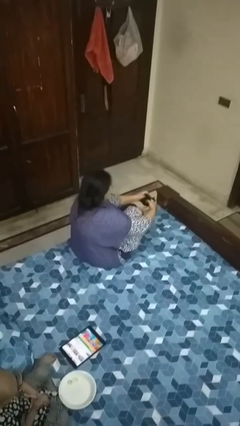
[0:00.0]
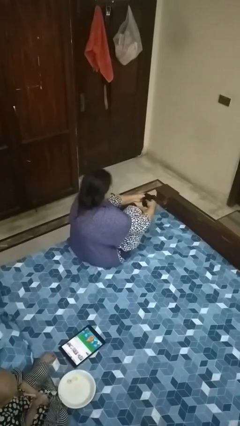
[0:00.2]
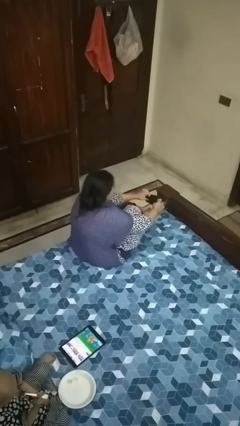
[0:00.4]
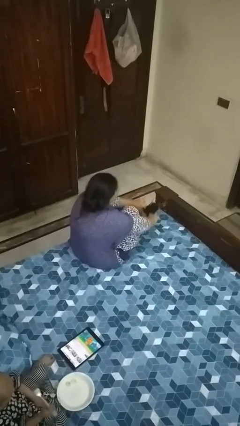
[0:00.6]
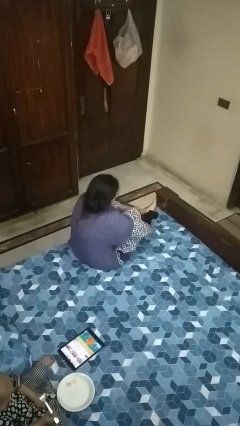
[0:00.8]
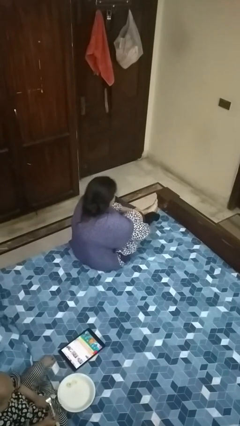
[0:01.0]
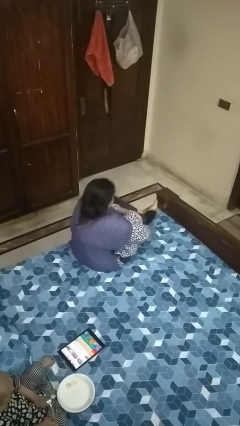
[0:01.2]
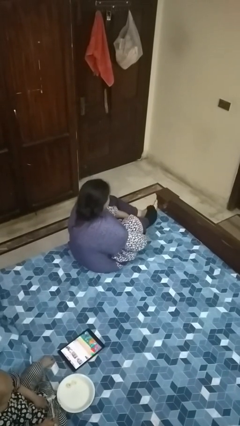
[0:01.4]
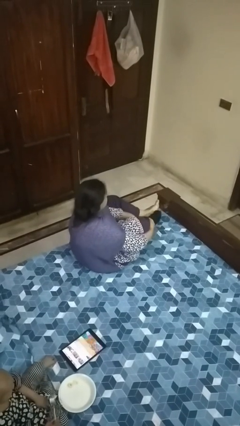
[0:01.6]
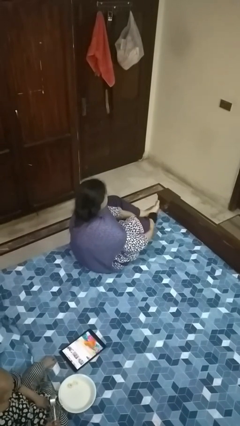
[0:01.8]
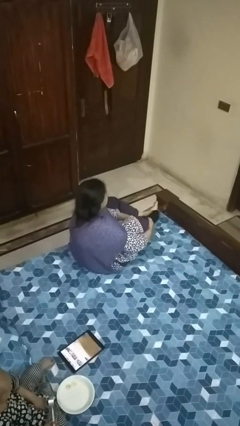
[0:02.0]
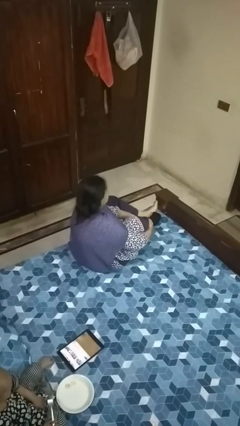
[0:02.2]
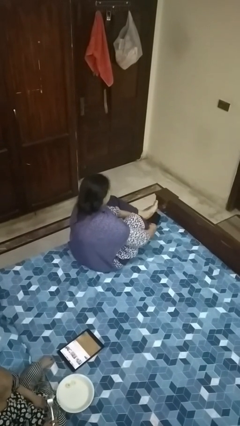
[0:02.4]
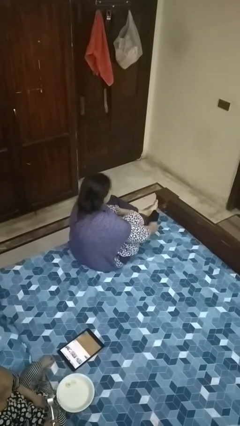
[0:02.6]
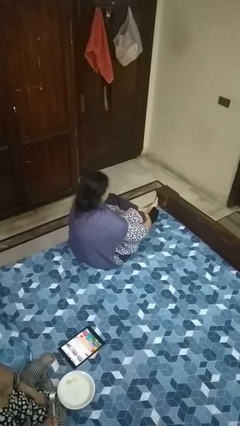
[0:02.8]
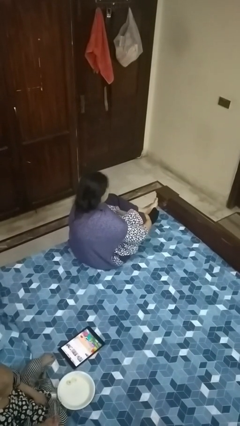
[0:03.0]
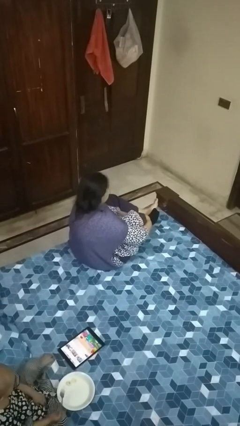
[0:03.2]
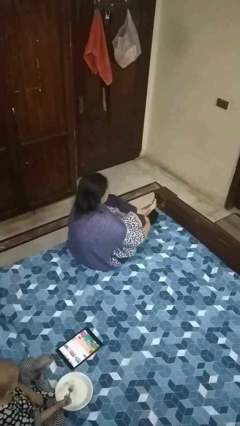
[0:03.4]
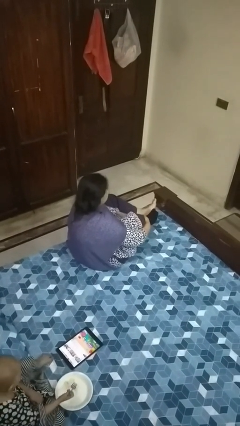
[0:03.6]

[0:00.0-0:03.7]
person puts on socks

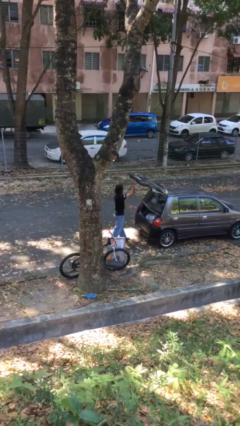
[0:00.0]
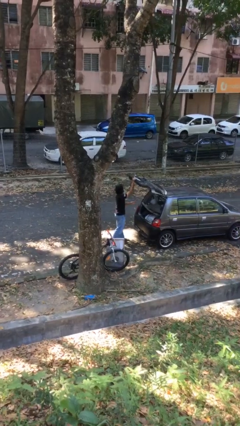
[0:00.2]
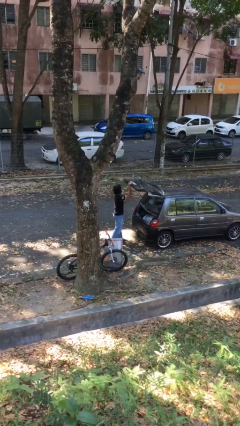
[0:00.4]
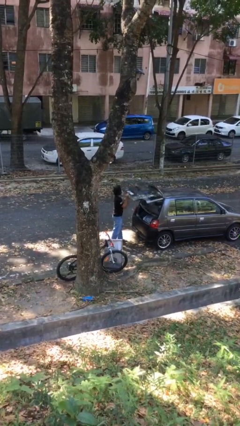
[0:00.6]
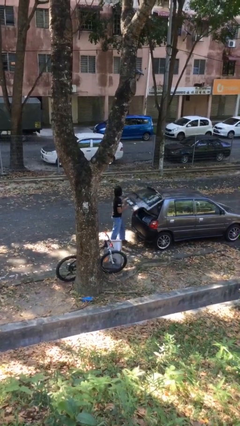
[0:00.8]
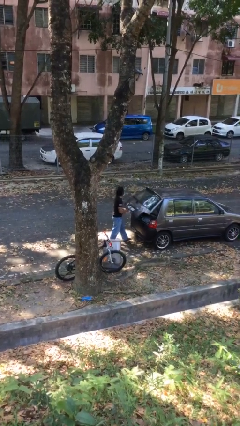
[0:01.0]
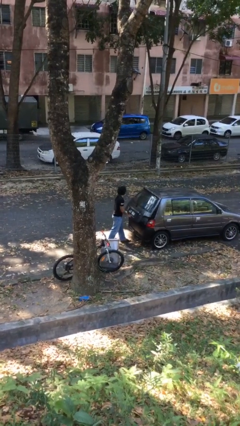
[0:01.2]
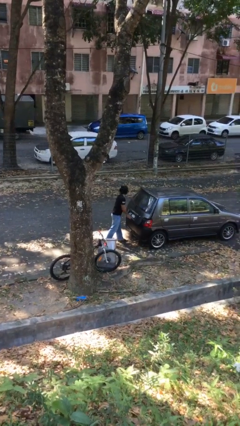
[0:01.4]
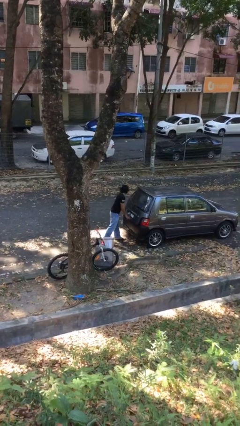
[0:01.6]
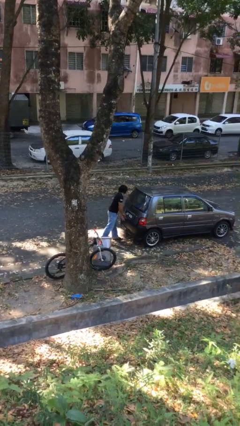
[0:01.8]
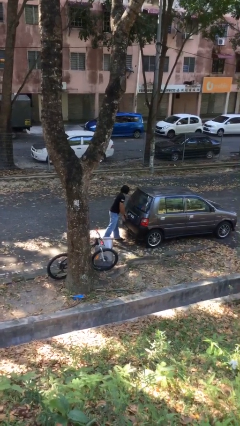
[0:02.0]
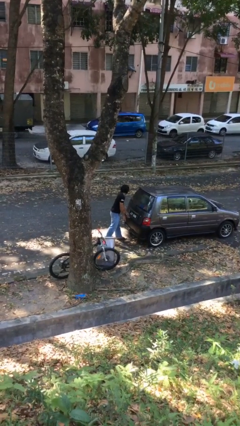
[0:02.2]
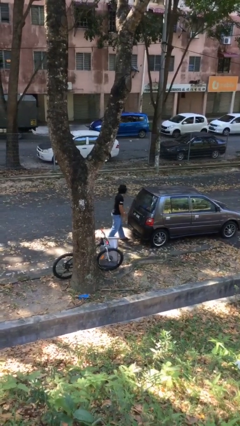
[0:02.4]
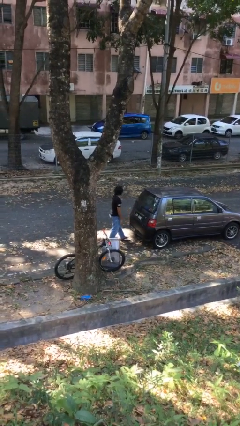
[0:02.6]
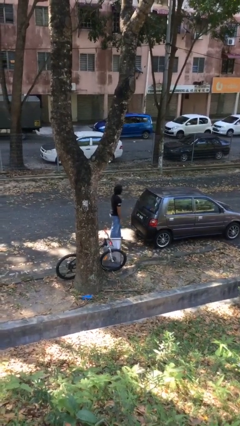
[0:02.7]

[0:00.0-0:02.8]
person closes car trunk

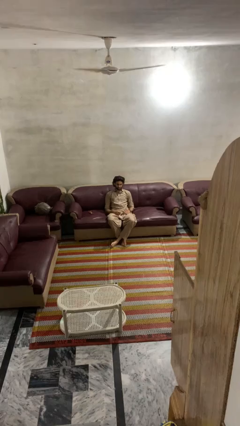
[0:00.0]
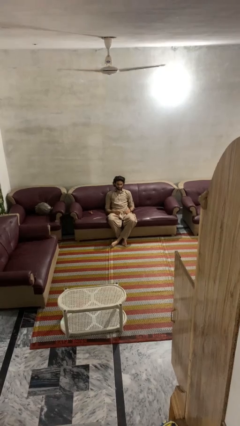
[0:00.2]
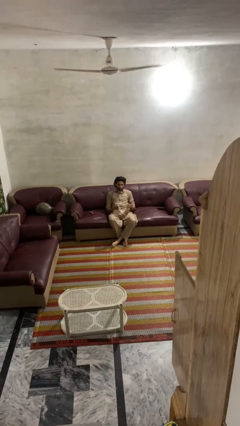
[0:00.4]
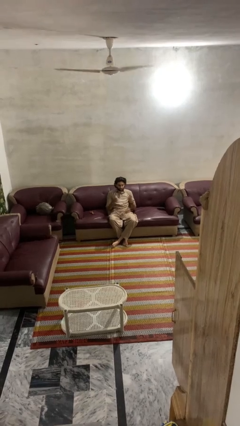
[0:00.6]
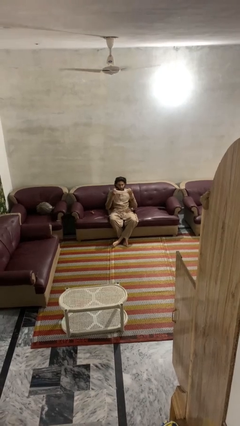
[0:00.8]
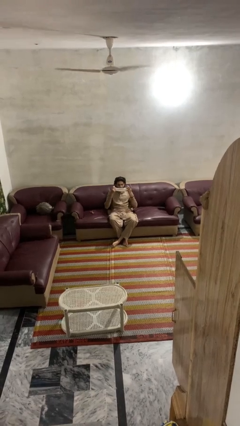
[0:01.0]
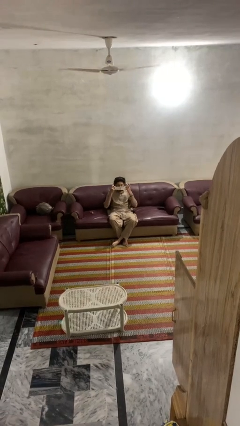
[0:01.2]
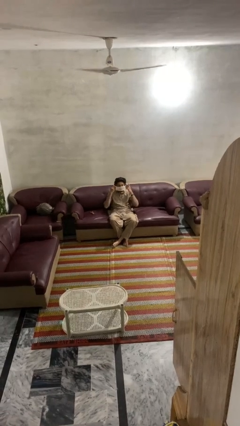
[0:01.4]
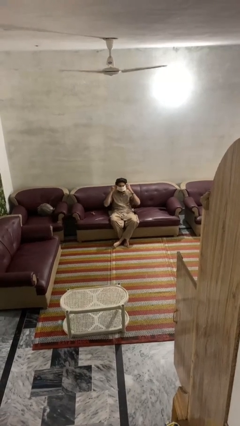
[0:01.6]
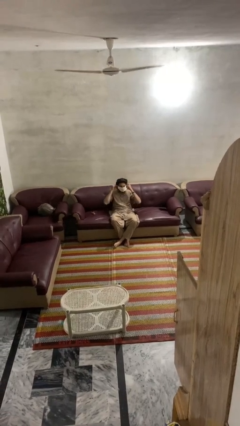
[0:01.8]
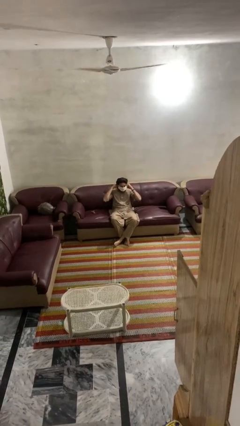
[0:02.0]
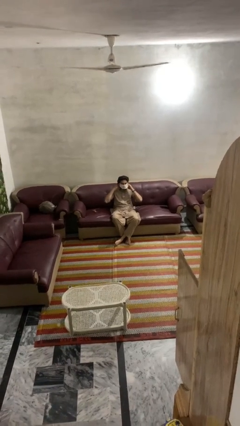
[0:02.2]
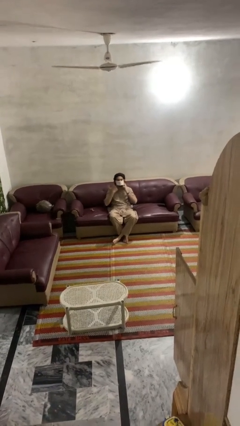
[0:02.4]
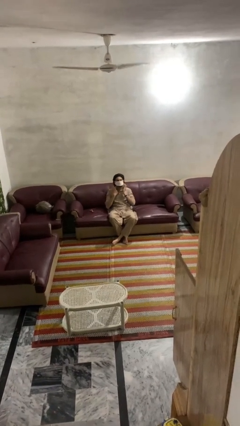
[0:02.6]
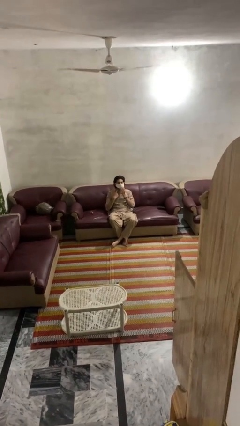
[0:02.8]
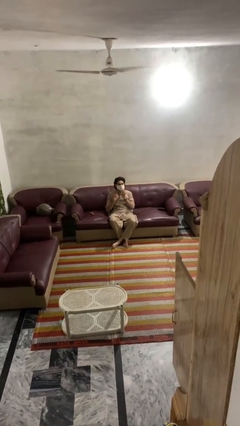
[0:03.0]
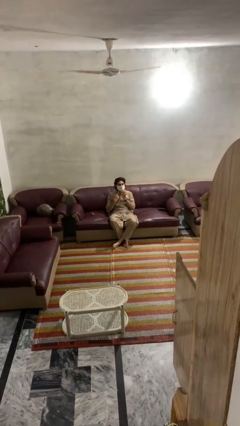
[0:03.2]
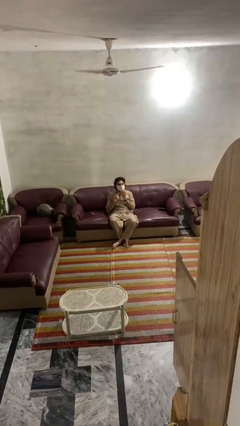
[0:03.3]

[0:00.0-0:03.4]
person puts on facemask

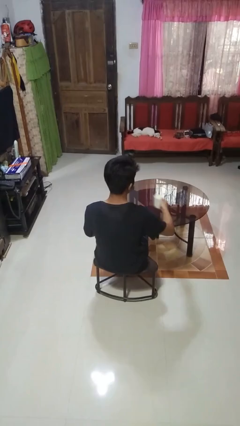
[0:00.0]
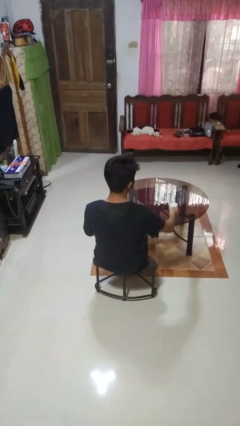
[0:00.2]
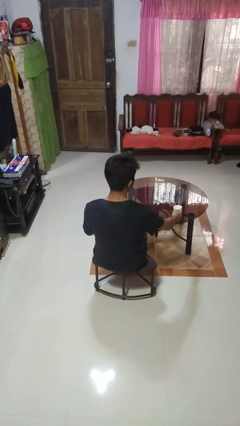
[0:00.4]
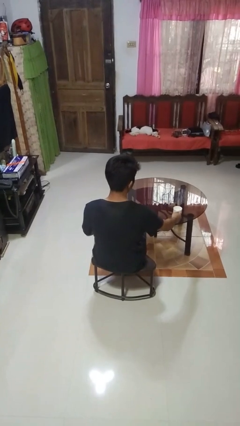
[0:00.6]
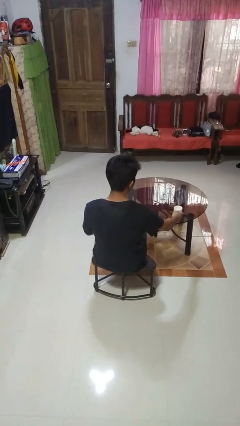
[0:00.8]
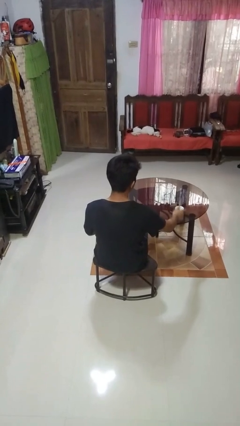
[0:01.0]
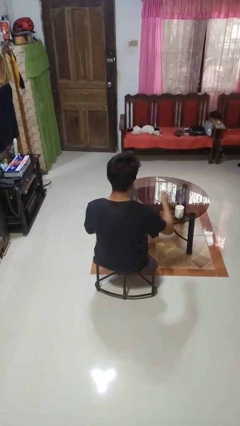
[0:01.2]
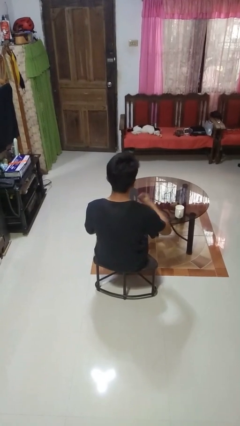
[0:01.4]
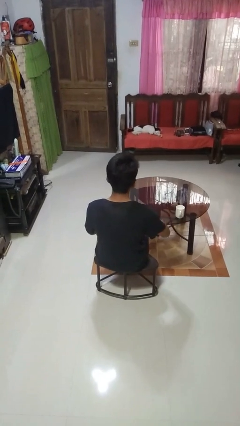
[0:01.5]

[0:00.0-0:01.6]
person puts down object on table

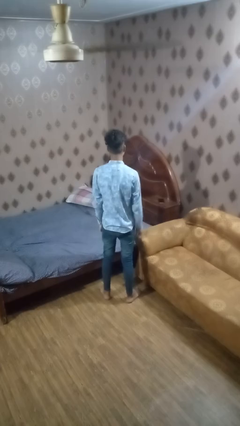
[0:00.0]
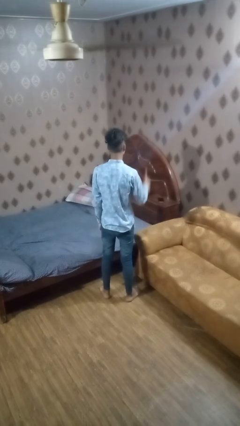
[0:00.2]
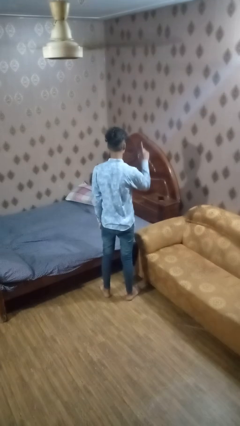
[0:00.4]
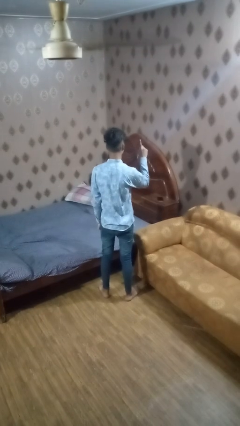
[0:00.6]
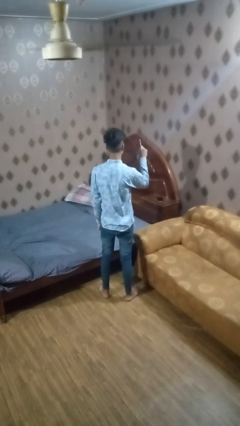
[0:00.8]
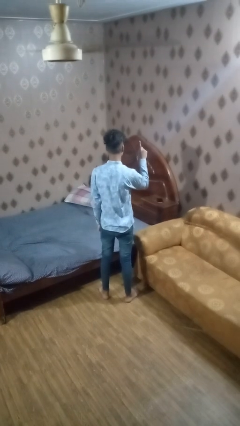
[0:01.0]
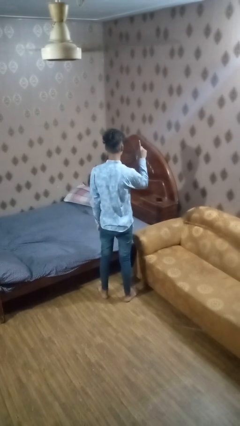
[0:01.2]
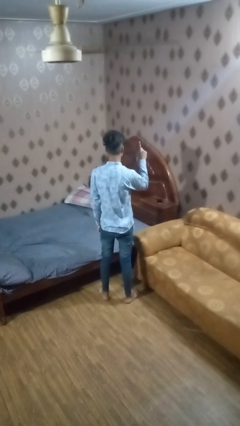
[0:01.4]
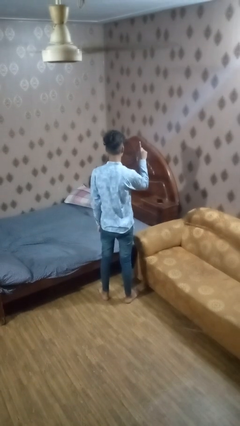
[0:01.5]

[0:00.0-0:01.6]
person gestures number one

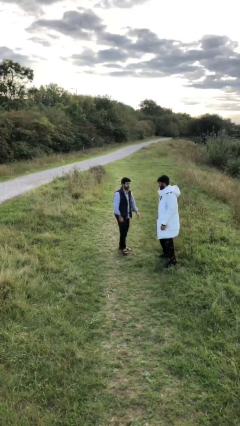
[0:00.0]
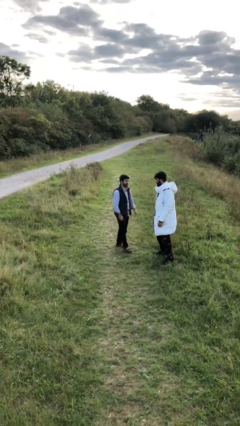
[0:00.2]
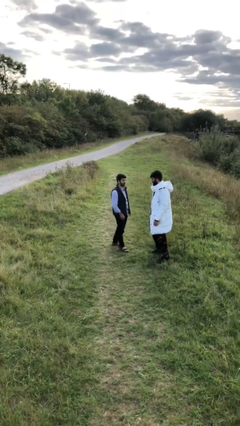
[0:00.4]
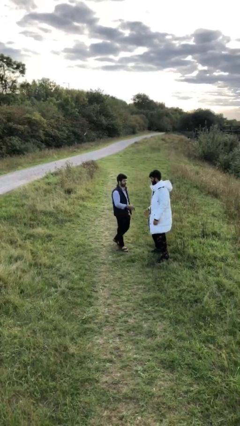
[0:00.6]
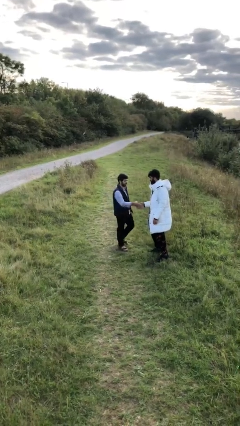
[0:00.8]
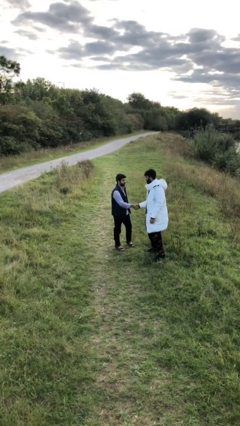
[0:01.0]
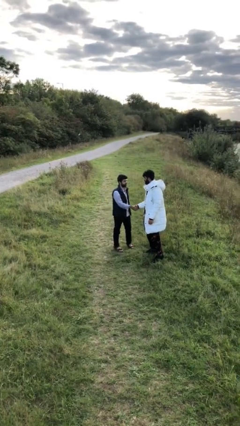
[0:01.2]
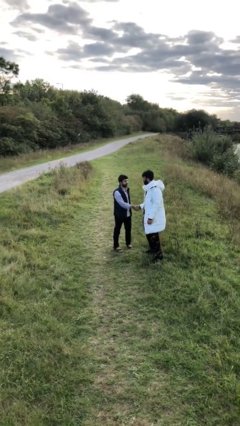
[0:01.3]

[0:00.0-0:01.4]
person shakes hand

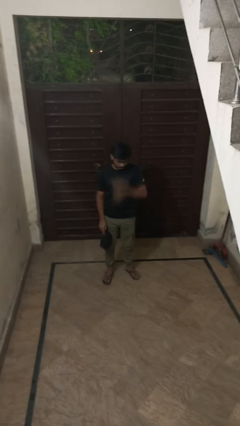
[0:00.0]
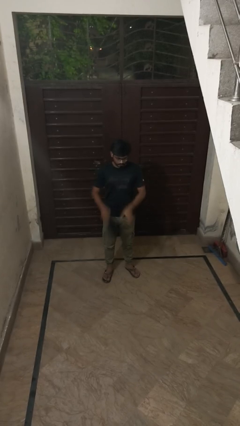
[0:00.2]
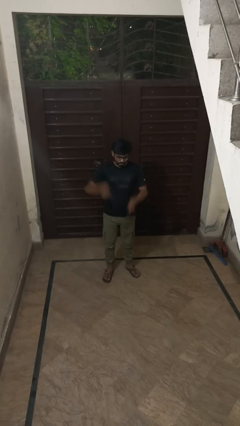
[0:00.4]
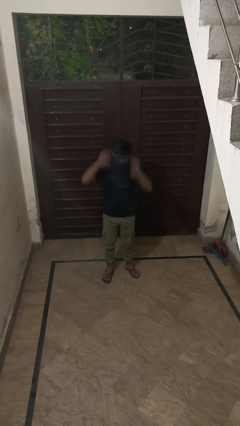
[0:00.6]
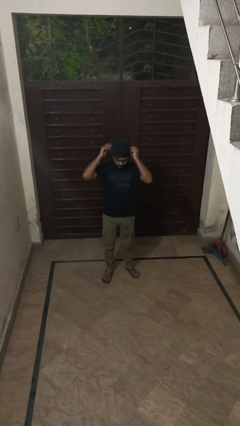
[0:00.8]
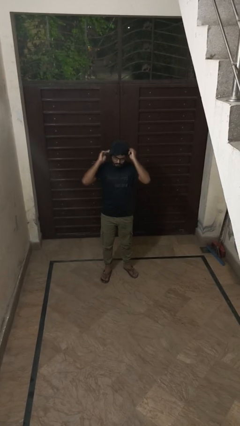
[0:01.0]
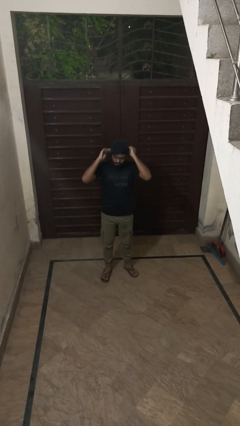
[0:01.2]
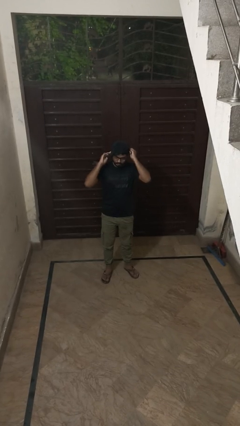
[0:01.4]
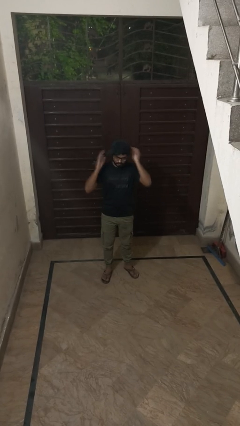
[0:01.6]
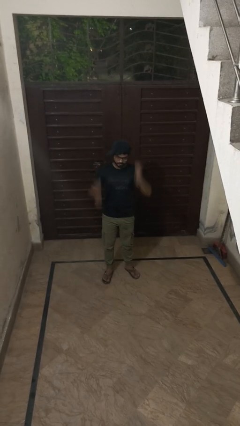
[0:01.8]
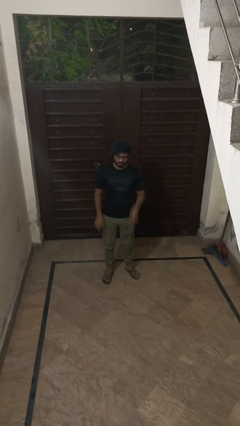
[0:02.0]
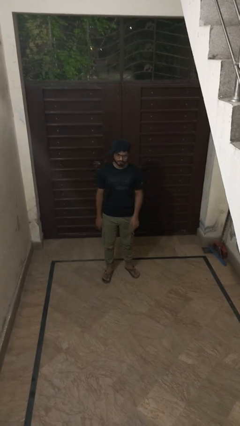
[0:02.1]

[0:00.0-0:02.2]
person puts on hat

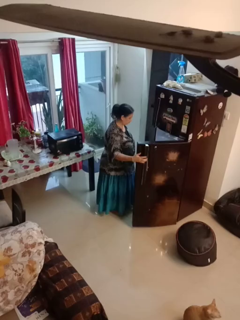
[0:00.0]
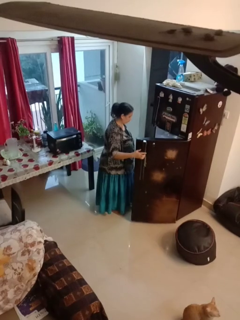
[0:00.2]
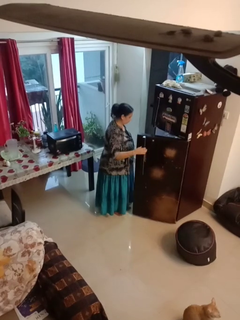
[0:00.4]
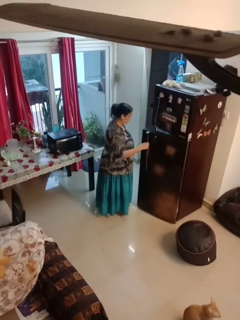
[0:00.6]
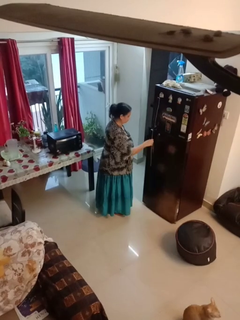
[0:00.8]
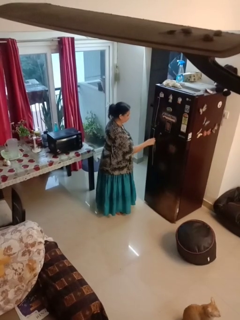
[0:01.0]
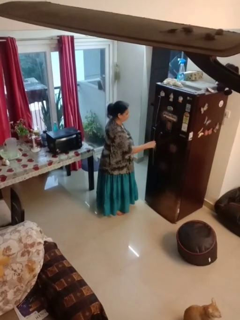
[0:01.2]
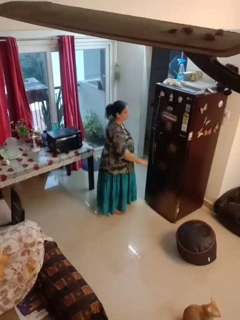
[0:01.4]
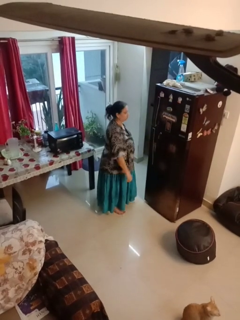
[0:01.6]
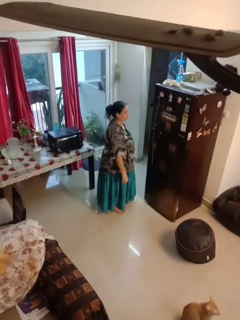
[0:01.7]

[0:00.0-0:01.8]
person closes refrigerator
